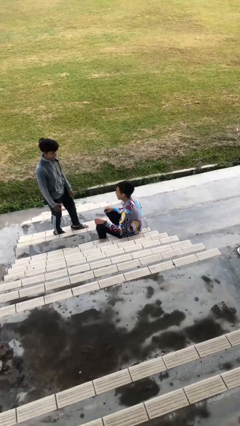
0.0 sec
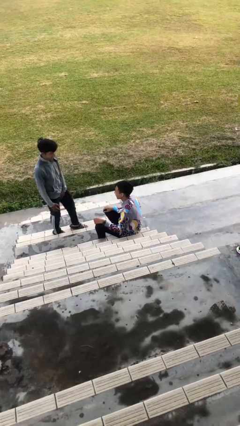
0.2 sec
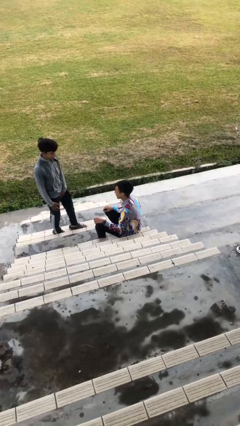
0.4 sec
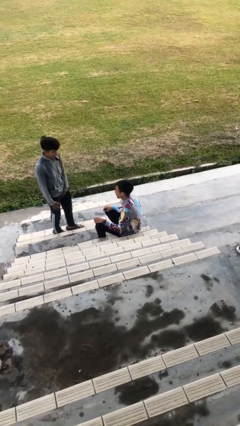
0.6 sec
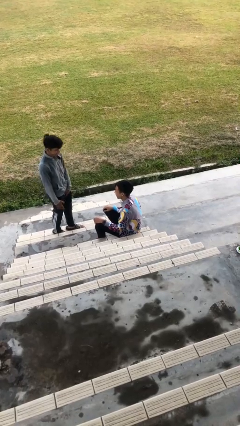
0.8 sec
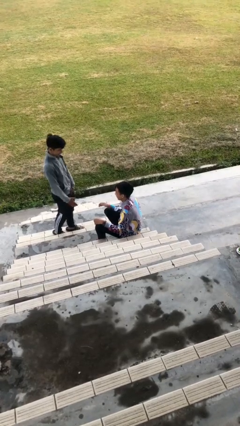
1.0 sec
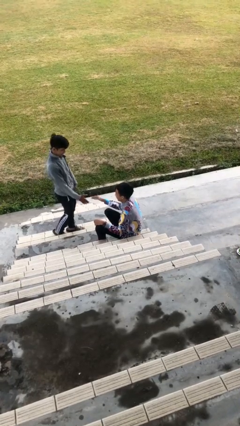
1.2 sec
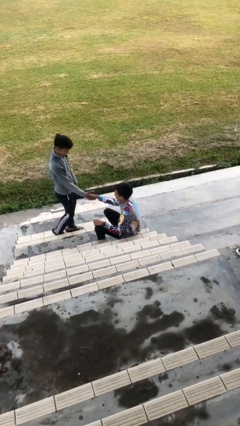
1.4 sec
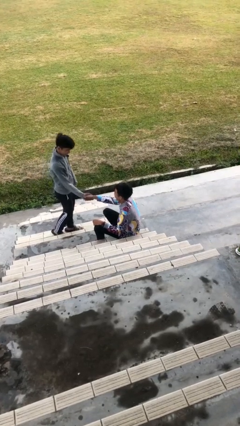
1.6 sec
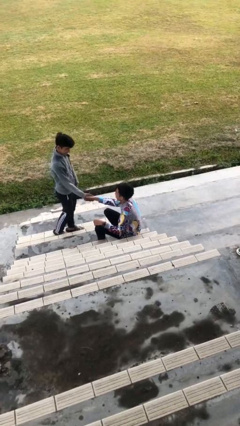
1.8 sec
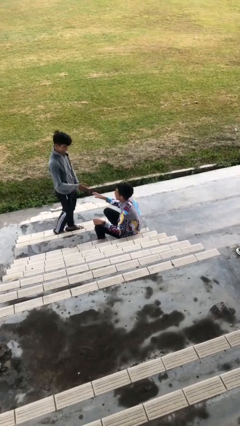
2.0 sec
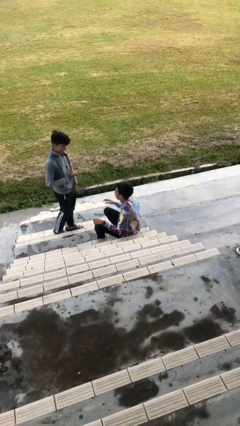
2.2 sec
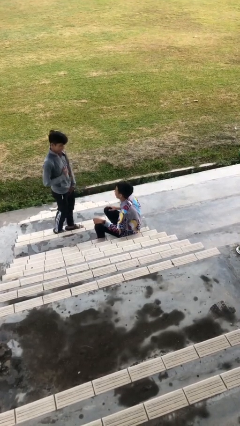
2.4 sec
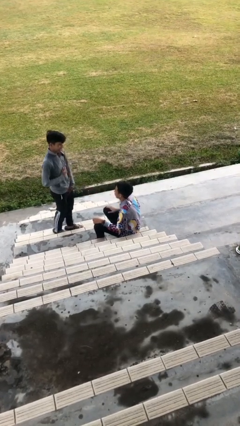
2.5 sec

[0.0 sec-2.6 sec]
person shakes hand

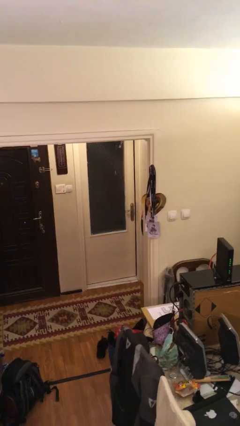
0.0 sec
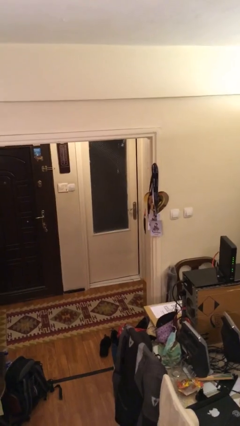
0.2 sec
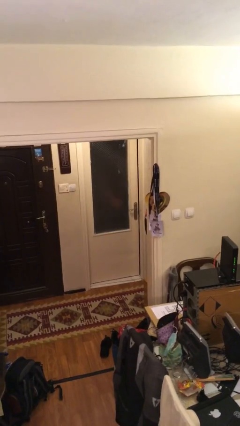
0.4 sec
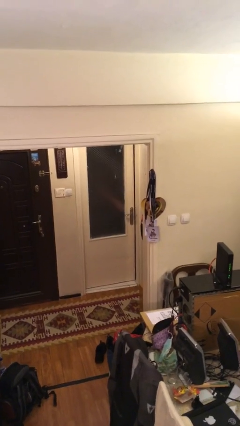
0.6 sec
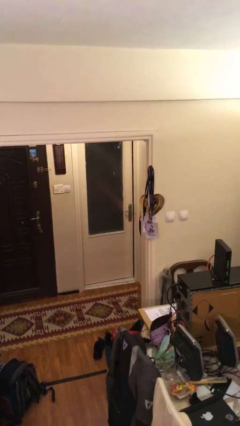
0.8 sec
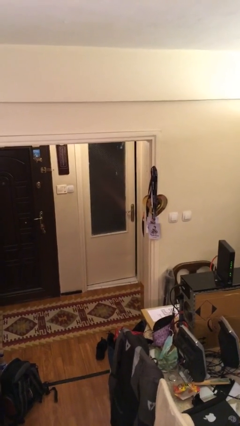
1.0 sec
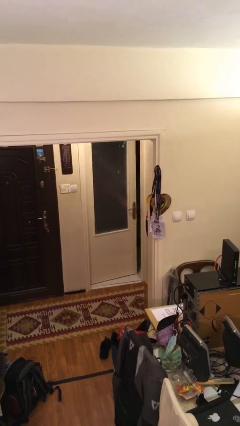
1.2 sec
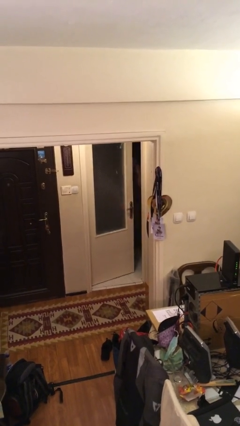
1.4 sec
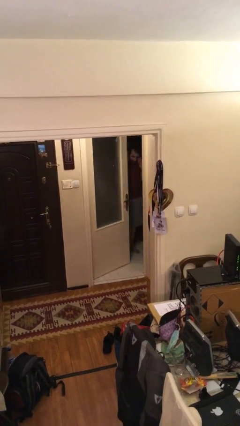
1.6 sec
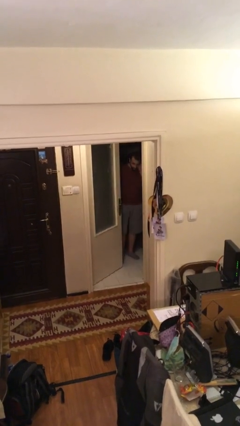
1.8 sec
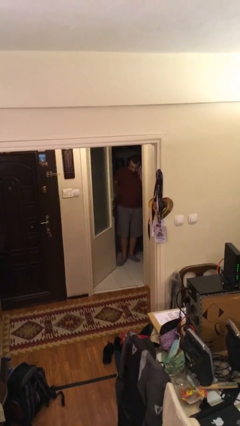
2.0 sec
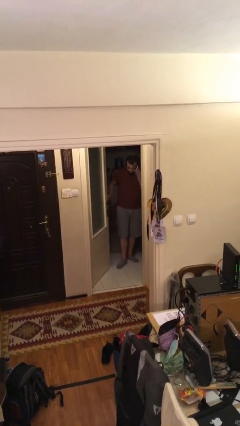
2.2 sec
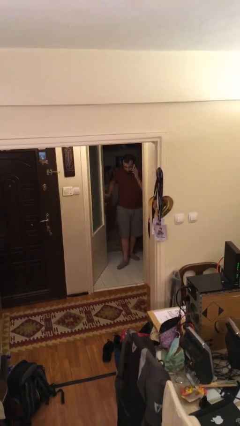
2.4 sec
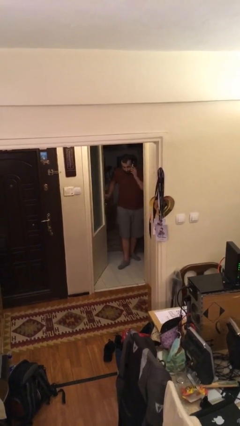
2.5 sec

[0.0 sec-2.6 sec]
person opens facility door

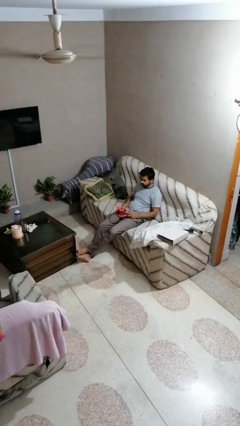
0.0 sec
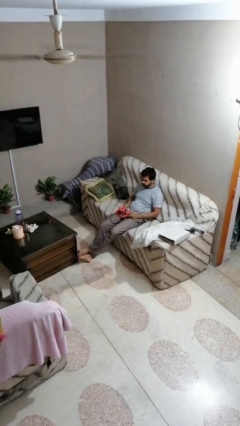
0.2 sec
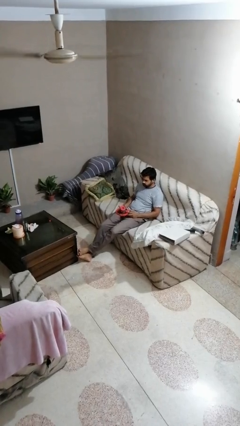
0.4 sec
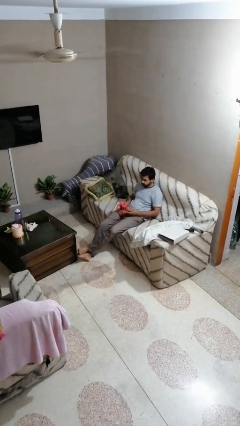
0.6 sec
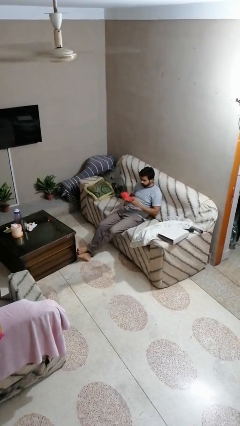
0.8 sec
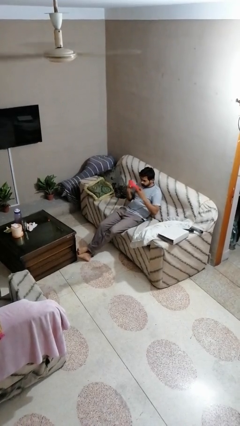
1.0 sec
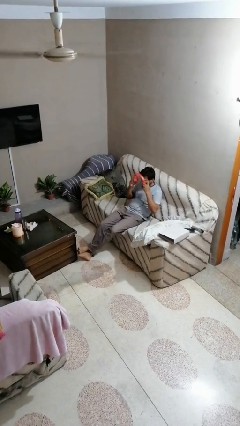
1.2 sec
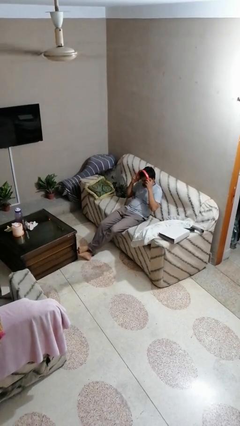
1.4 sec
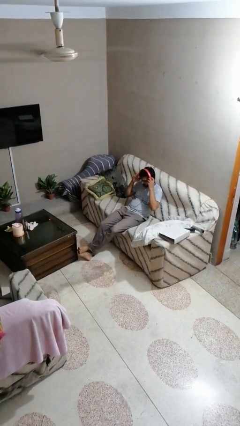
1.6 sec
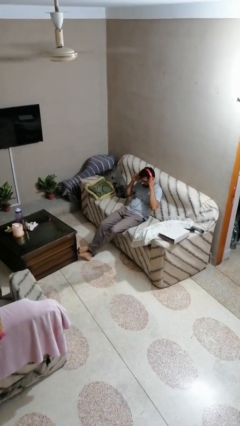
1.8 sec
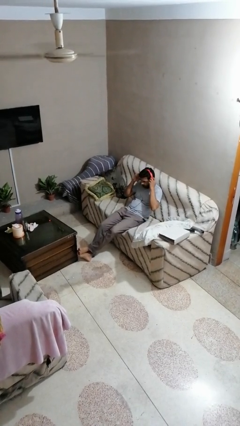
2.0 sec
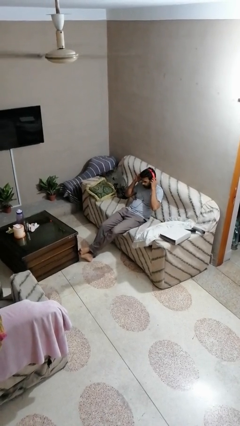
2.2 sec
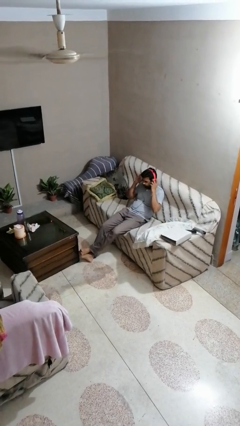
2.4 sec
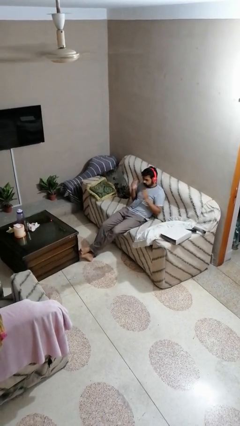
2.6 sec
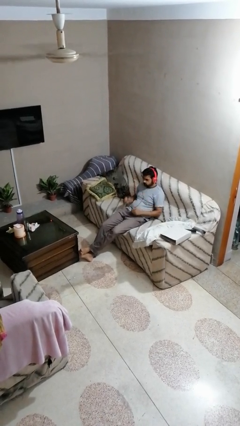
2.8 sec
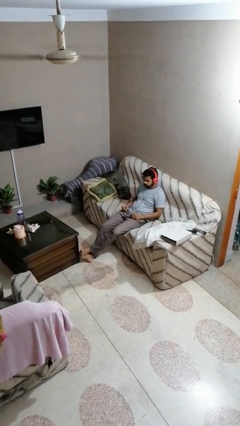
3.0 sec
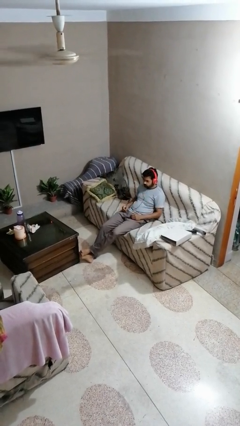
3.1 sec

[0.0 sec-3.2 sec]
person puts on headphones

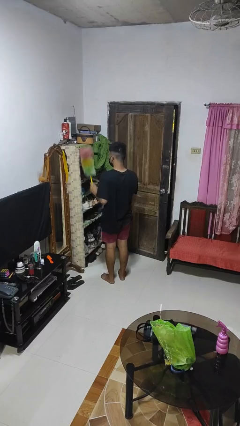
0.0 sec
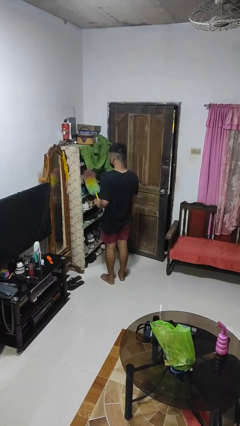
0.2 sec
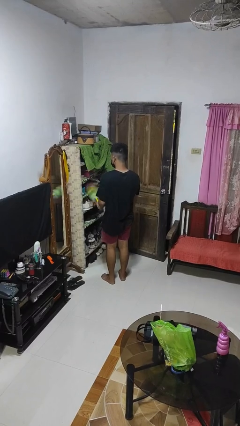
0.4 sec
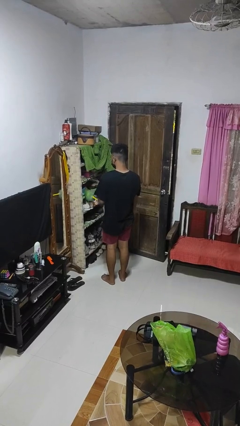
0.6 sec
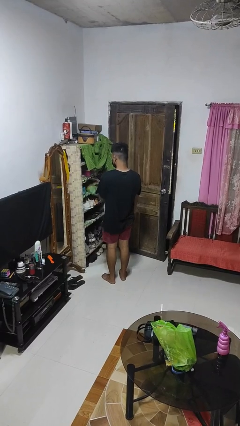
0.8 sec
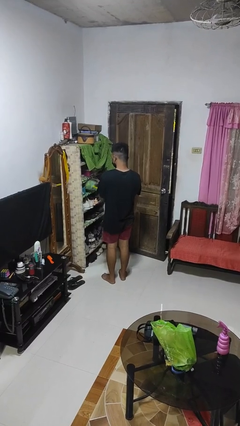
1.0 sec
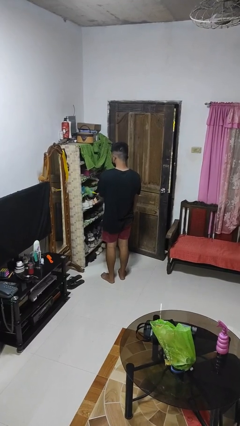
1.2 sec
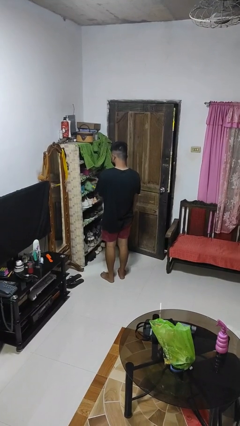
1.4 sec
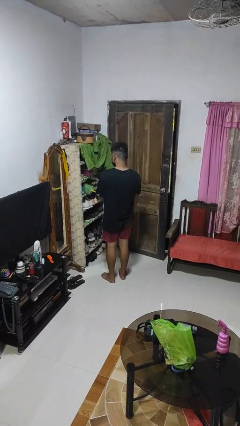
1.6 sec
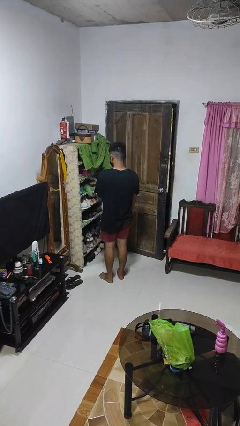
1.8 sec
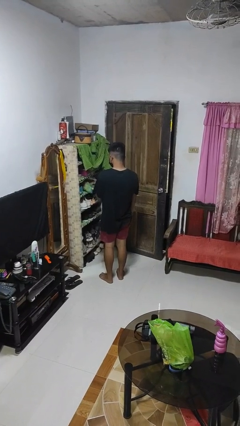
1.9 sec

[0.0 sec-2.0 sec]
person dusts furniture

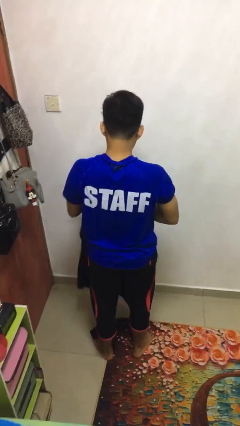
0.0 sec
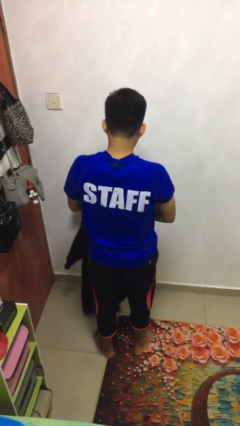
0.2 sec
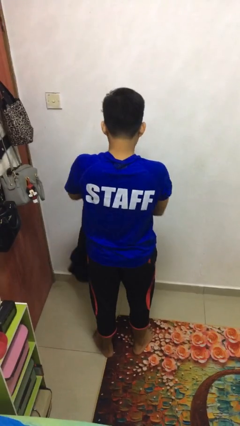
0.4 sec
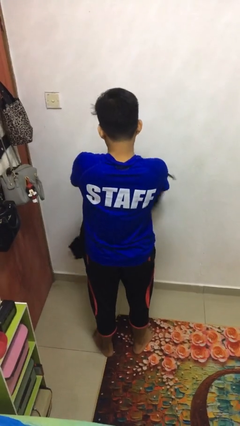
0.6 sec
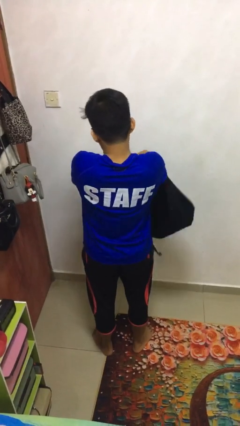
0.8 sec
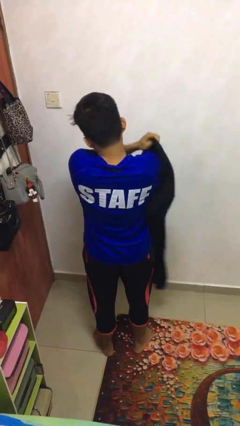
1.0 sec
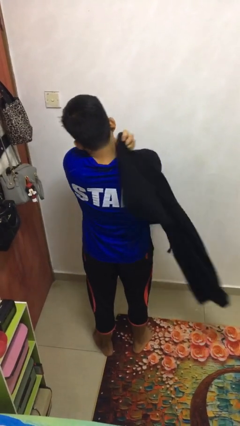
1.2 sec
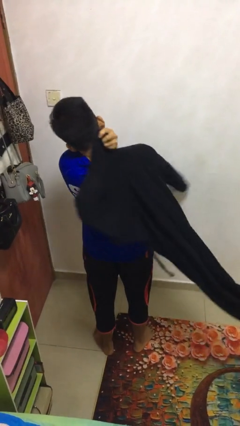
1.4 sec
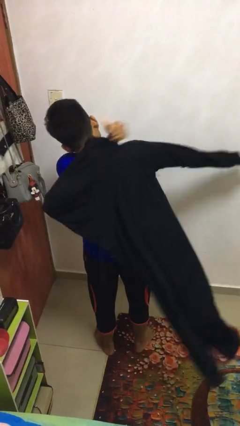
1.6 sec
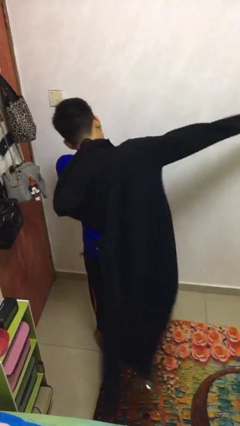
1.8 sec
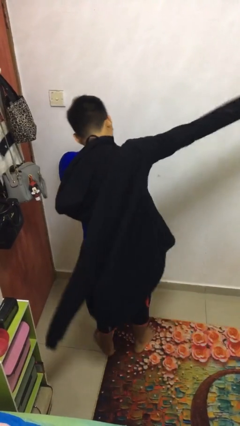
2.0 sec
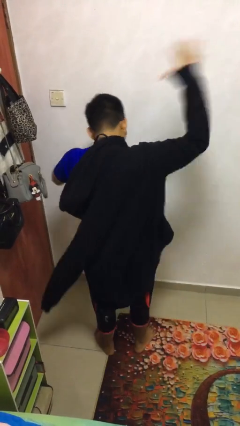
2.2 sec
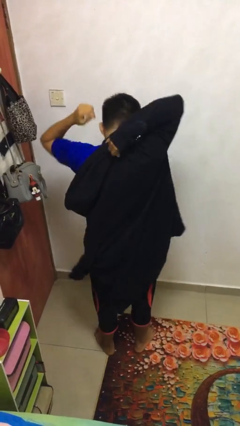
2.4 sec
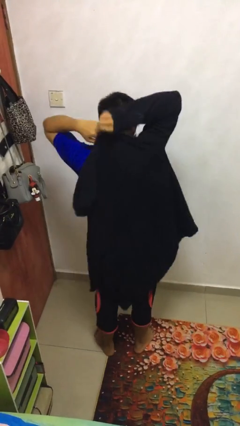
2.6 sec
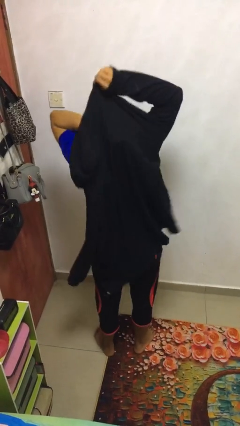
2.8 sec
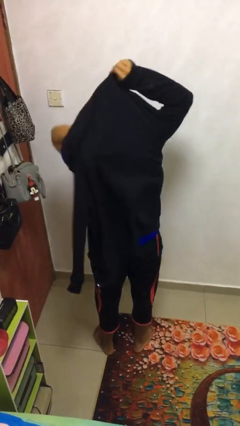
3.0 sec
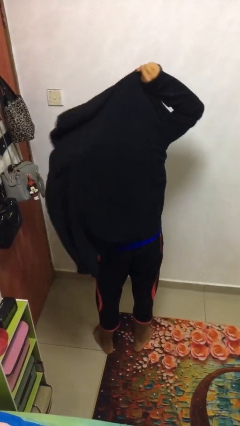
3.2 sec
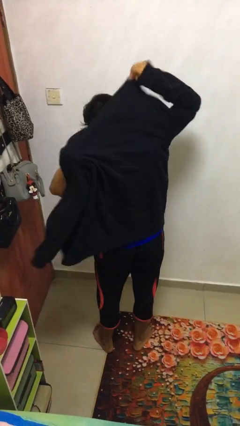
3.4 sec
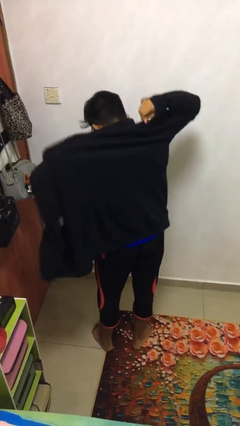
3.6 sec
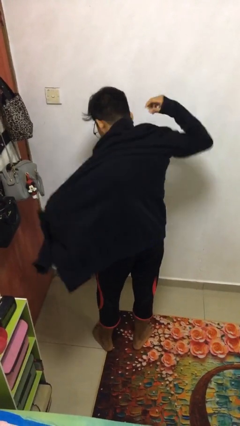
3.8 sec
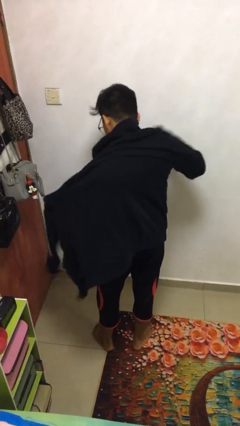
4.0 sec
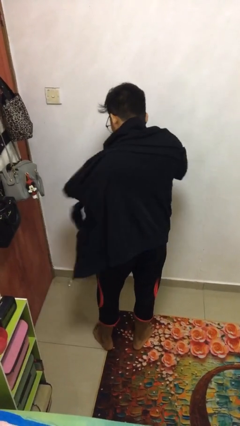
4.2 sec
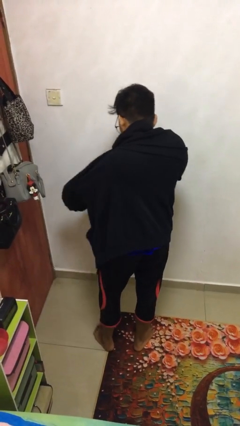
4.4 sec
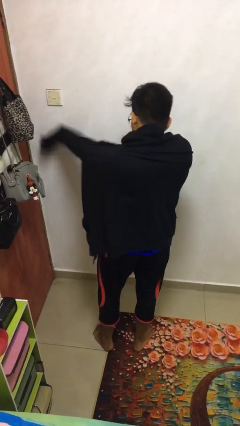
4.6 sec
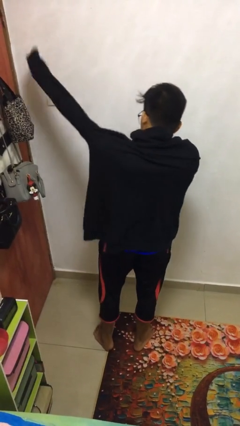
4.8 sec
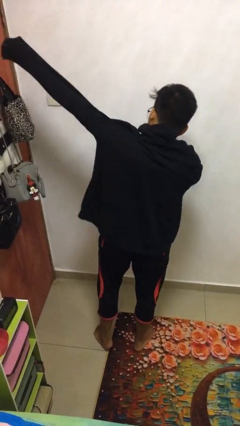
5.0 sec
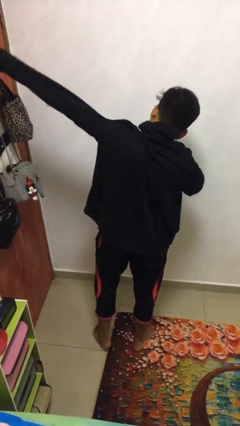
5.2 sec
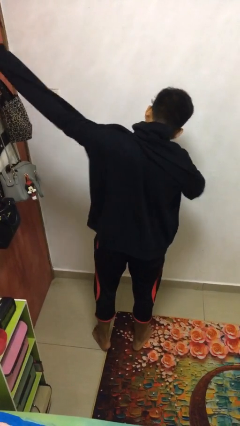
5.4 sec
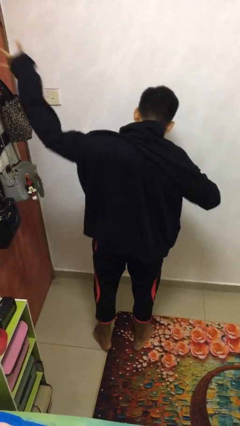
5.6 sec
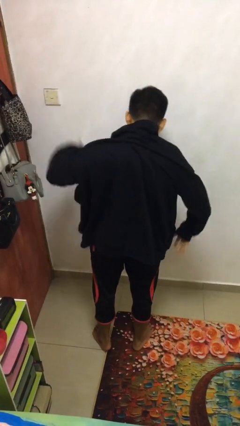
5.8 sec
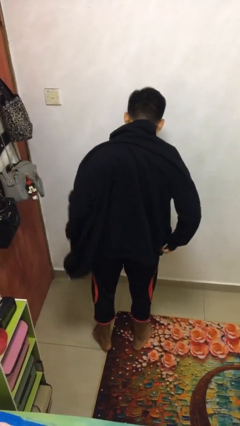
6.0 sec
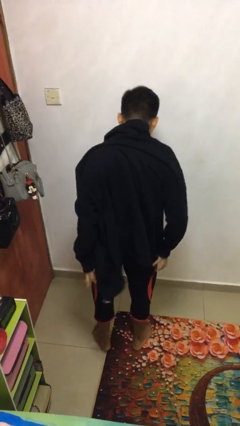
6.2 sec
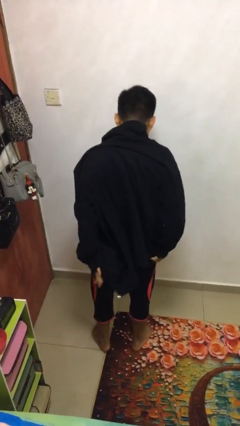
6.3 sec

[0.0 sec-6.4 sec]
person puts on jacket

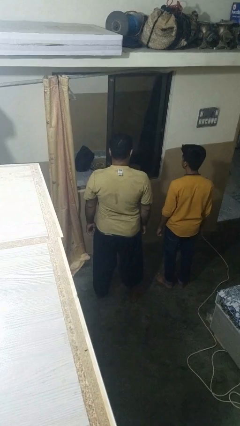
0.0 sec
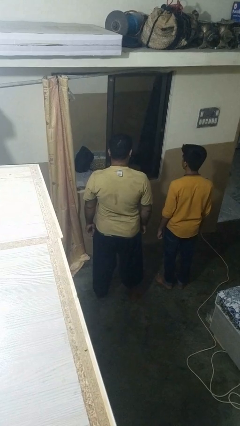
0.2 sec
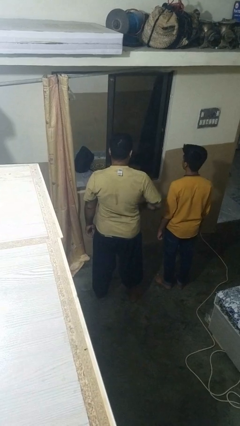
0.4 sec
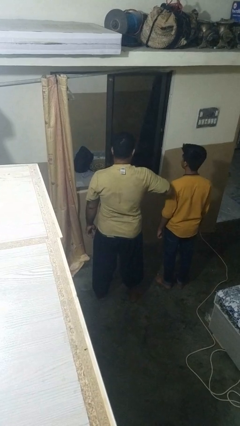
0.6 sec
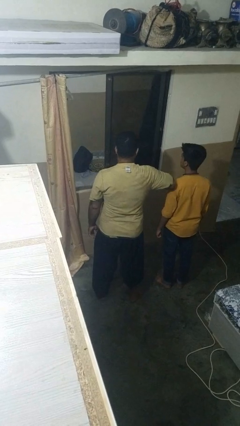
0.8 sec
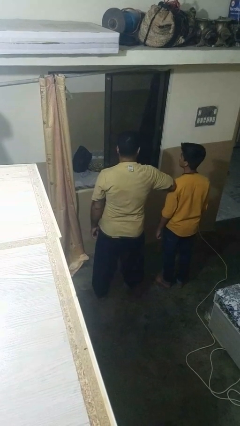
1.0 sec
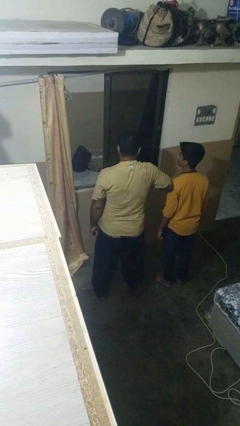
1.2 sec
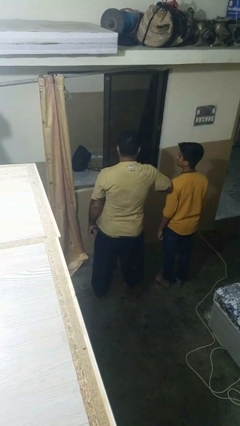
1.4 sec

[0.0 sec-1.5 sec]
person nudges person with elbow
